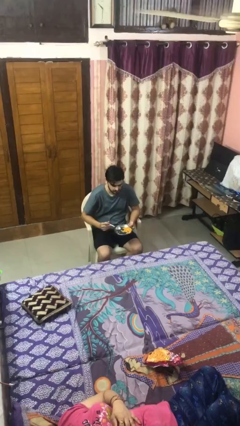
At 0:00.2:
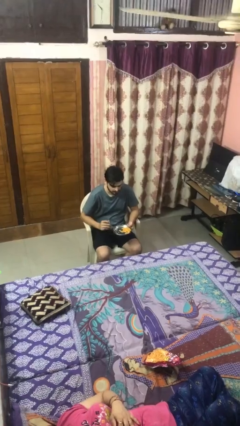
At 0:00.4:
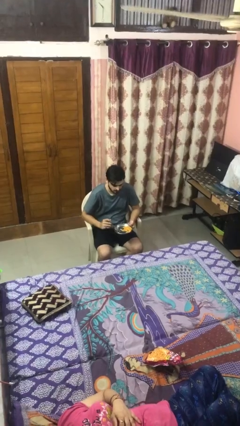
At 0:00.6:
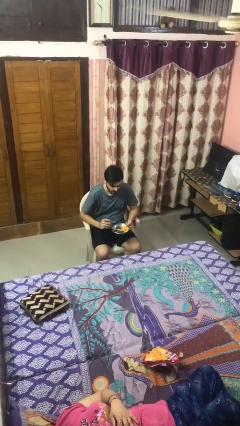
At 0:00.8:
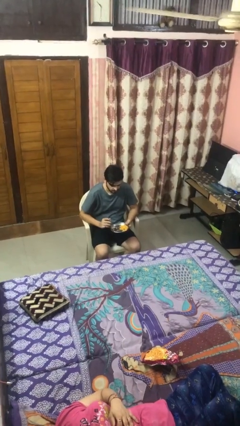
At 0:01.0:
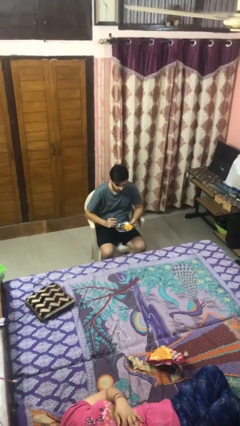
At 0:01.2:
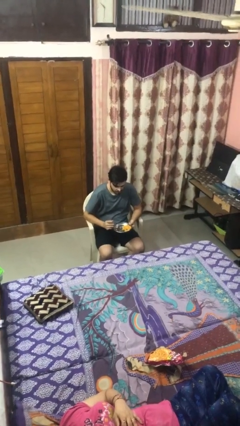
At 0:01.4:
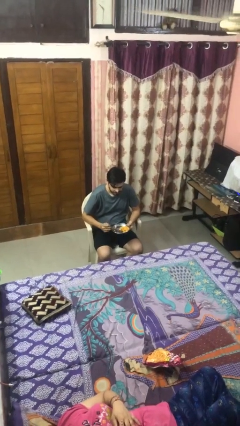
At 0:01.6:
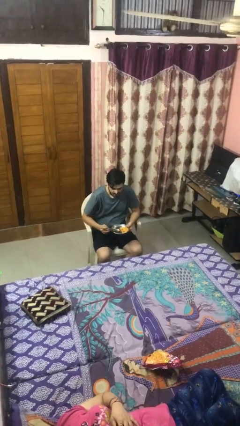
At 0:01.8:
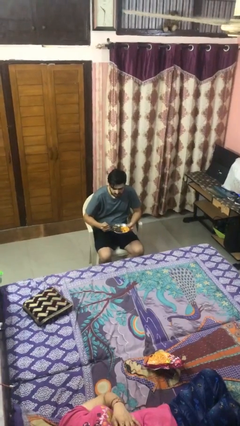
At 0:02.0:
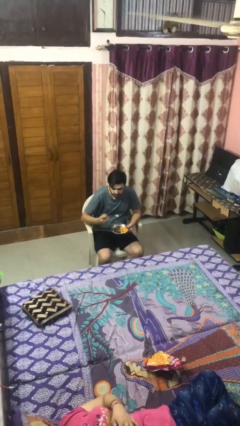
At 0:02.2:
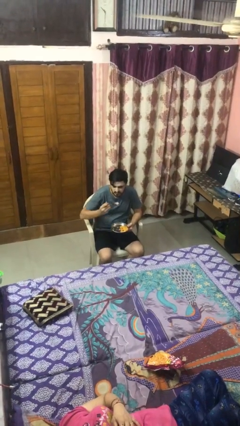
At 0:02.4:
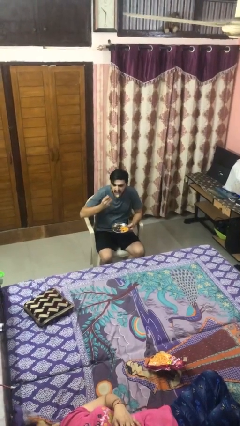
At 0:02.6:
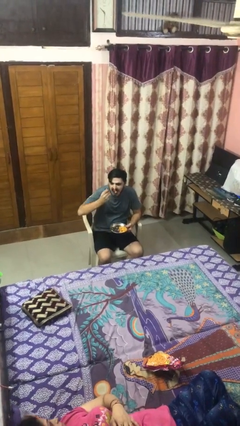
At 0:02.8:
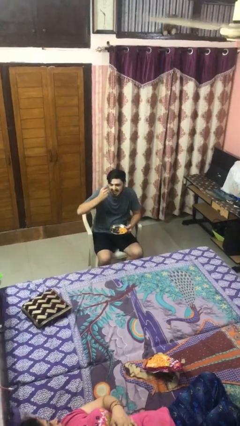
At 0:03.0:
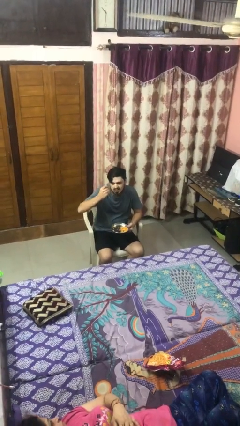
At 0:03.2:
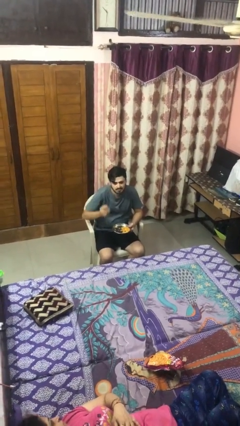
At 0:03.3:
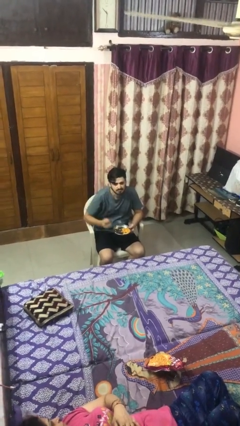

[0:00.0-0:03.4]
person eats with utensil

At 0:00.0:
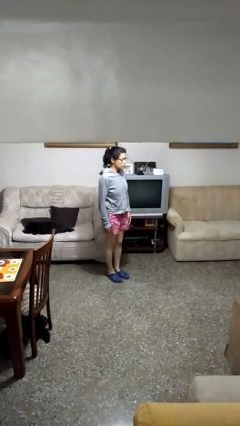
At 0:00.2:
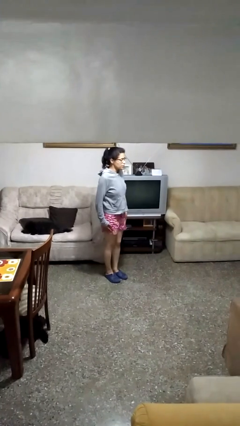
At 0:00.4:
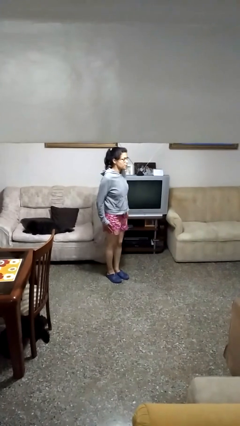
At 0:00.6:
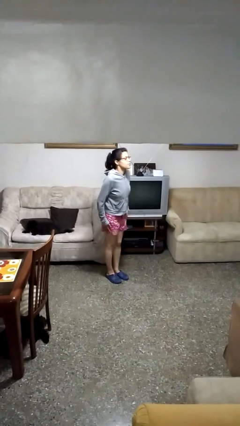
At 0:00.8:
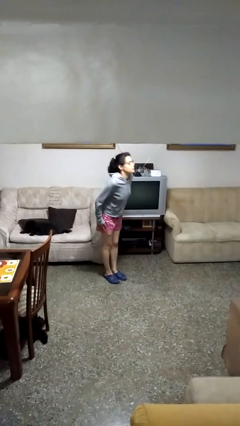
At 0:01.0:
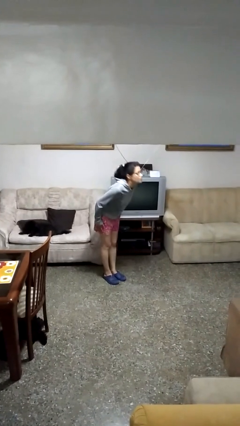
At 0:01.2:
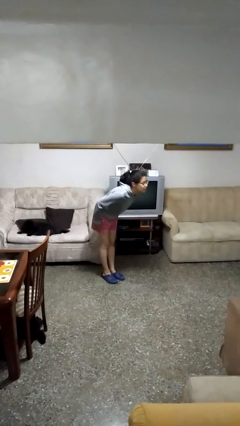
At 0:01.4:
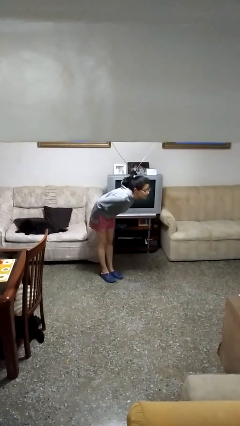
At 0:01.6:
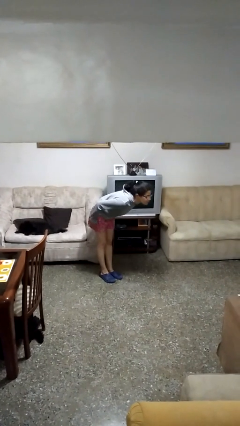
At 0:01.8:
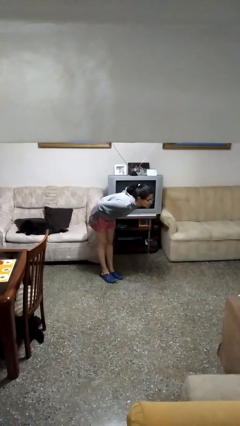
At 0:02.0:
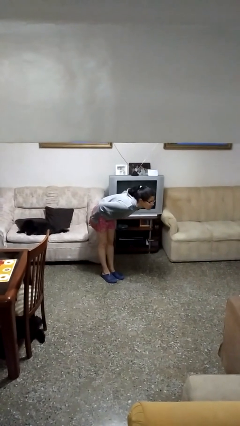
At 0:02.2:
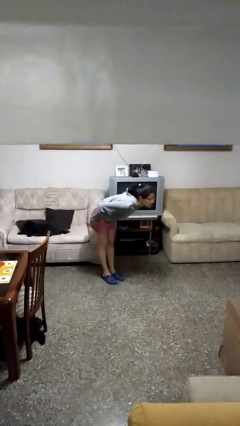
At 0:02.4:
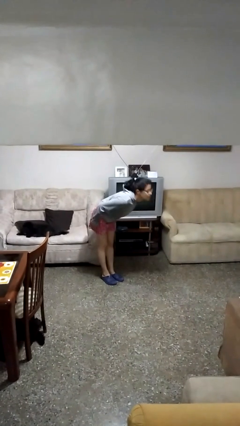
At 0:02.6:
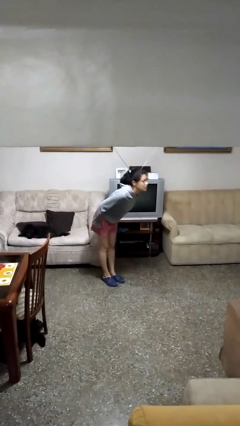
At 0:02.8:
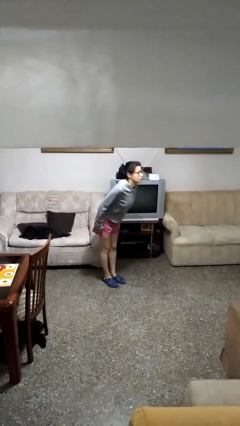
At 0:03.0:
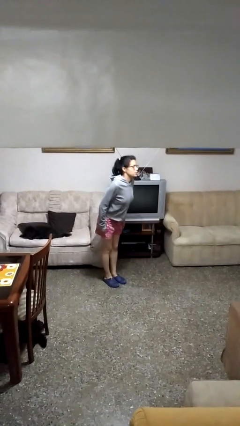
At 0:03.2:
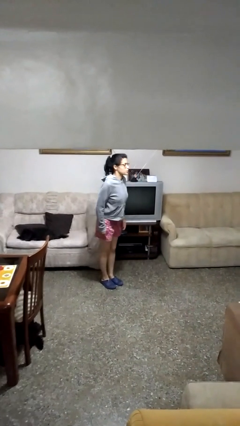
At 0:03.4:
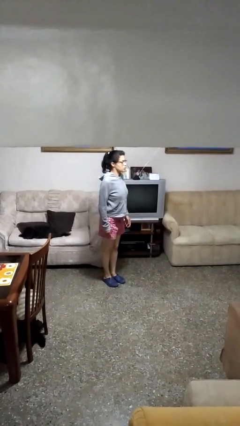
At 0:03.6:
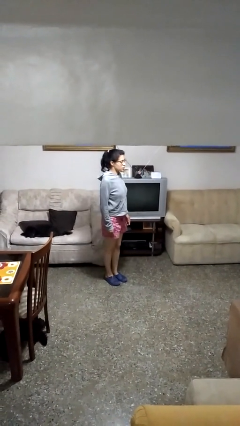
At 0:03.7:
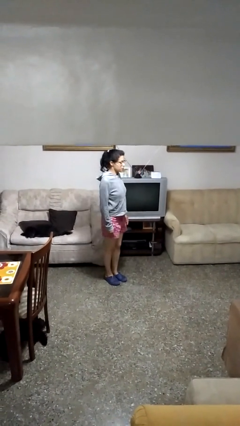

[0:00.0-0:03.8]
person bows

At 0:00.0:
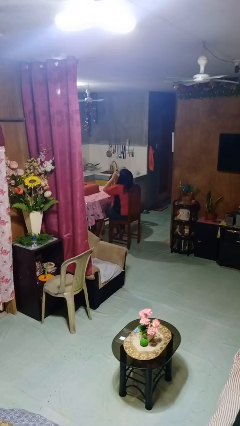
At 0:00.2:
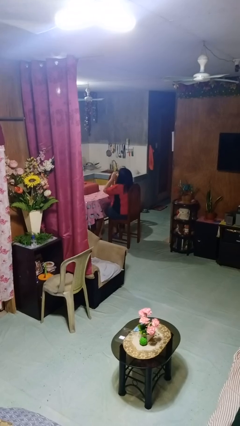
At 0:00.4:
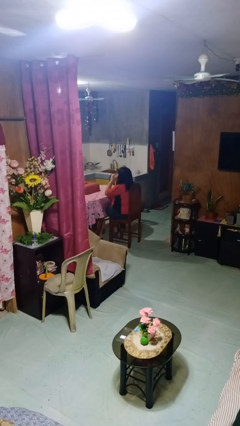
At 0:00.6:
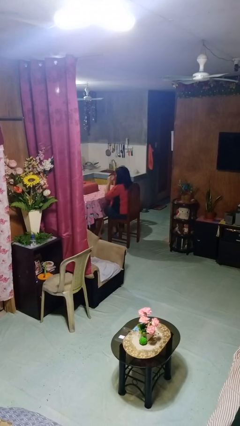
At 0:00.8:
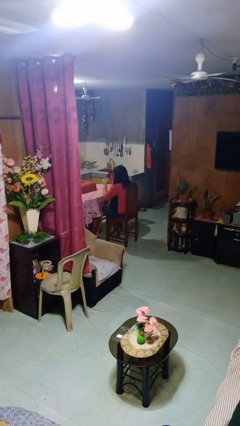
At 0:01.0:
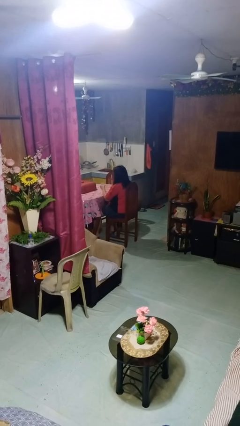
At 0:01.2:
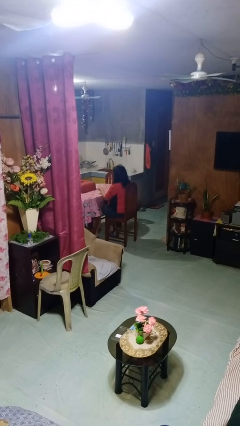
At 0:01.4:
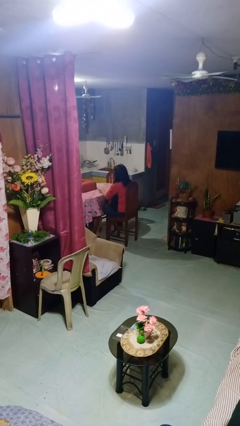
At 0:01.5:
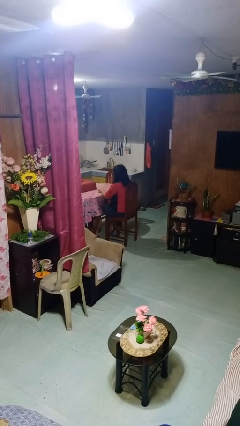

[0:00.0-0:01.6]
person puts down object on table

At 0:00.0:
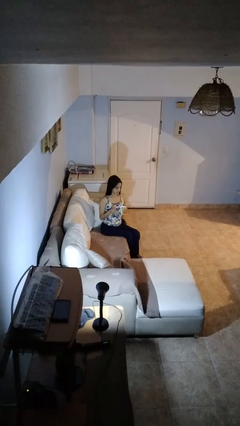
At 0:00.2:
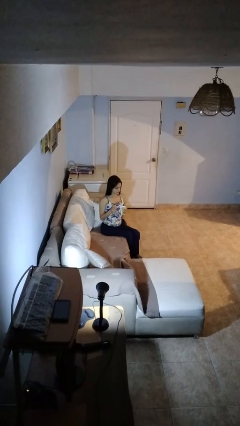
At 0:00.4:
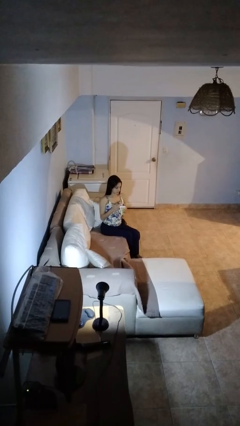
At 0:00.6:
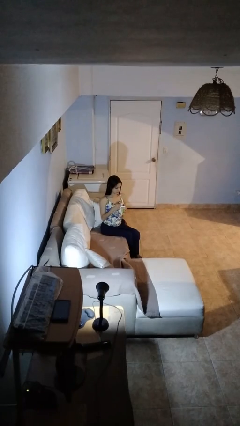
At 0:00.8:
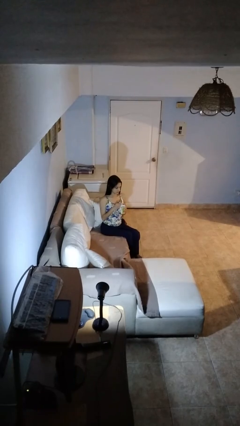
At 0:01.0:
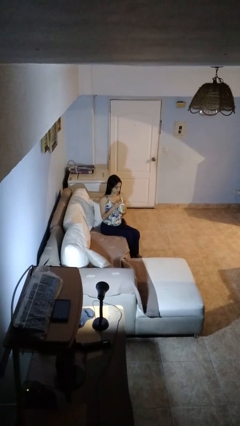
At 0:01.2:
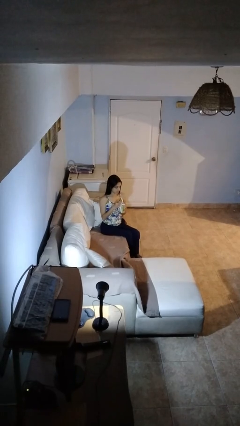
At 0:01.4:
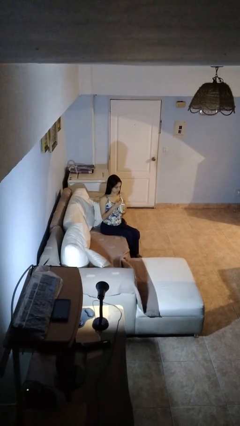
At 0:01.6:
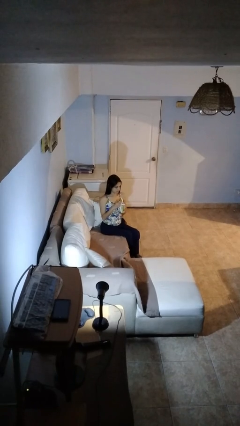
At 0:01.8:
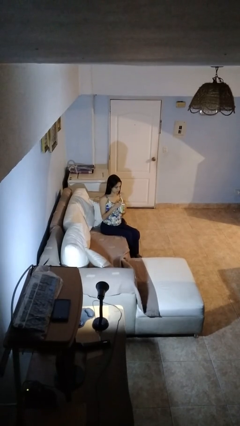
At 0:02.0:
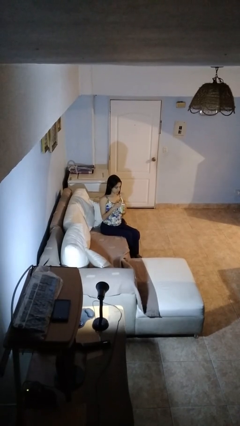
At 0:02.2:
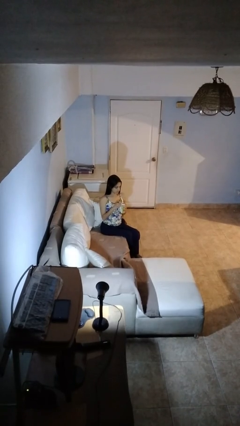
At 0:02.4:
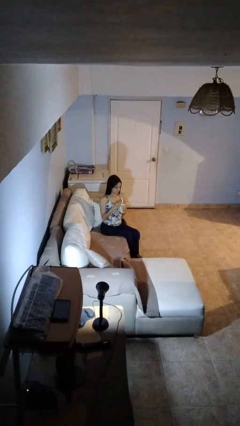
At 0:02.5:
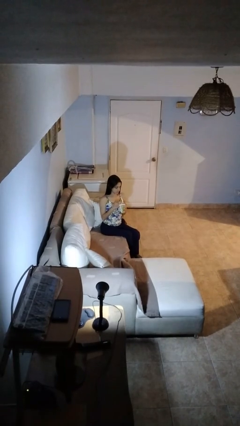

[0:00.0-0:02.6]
person stirs mug

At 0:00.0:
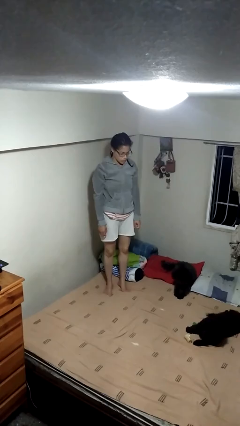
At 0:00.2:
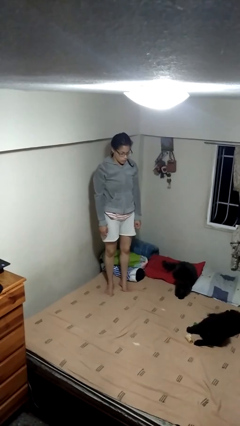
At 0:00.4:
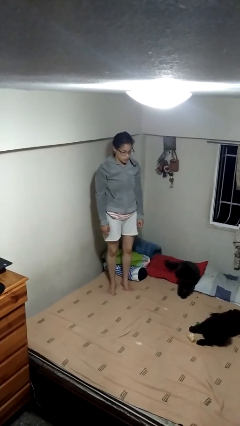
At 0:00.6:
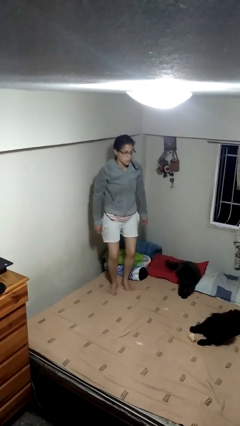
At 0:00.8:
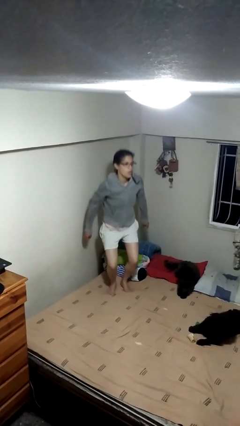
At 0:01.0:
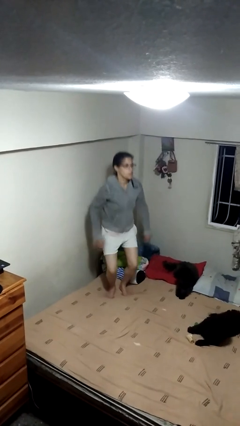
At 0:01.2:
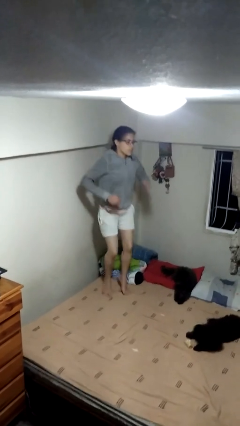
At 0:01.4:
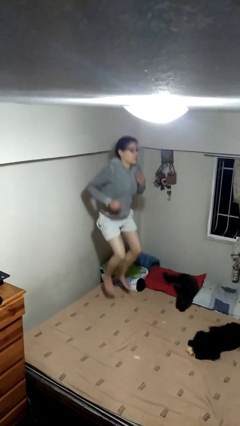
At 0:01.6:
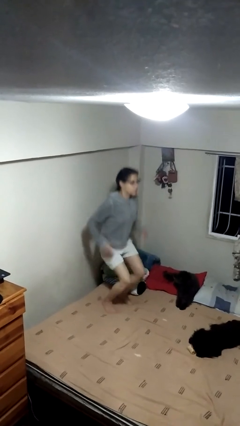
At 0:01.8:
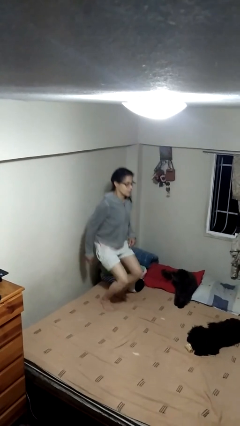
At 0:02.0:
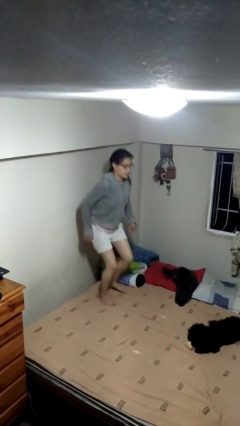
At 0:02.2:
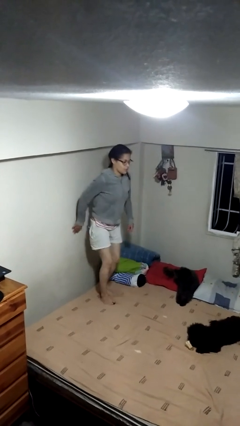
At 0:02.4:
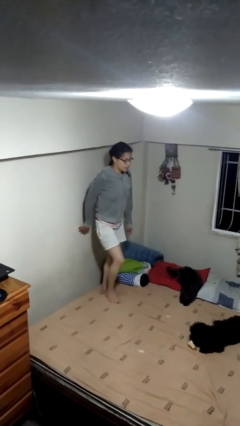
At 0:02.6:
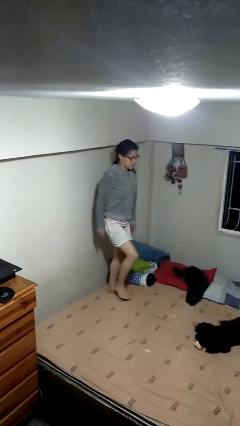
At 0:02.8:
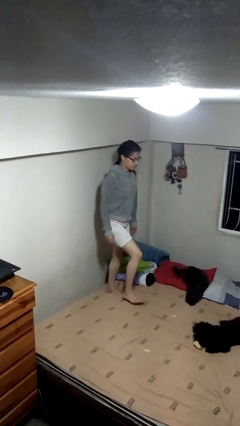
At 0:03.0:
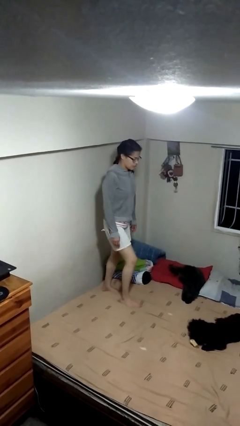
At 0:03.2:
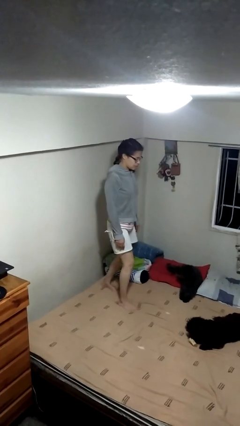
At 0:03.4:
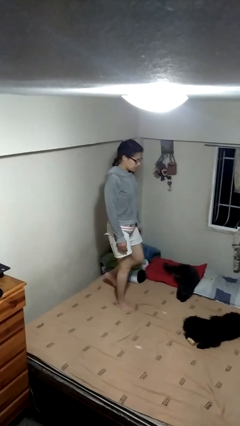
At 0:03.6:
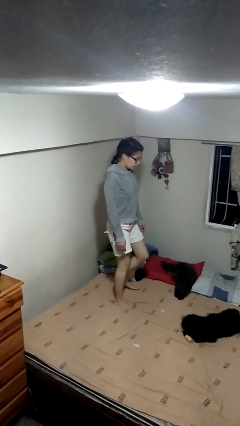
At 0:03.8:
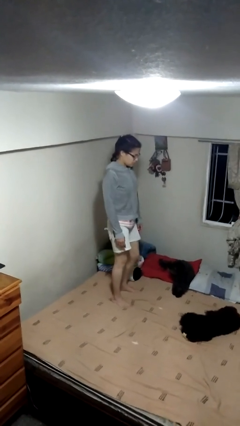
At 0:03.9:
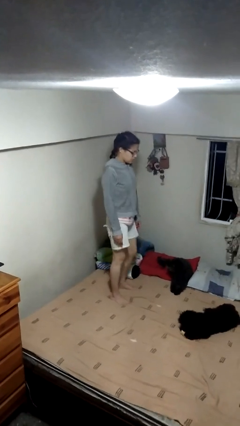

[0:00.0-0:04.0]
person jumps on bed

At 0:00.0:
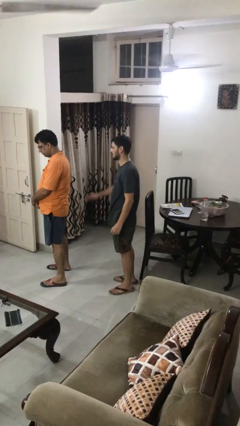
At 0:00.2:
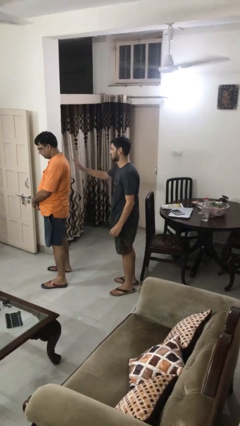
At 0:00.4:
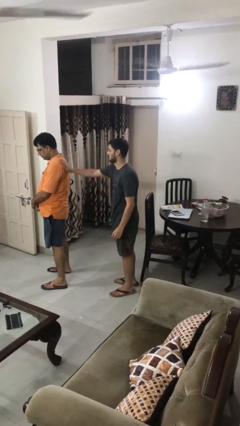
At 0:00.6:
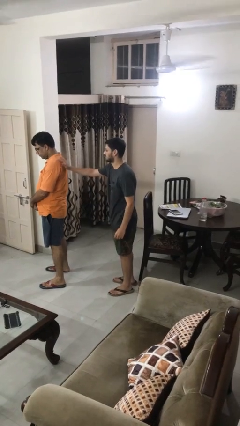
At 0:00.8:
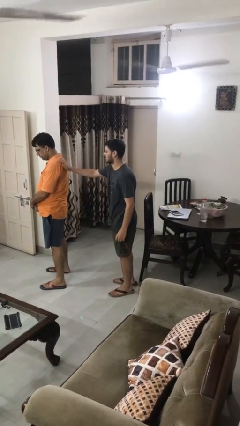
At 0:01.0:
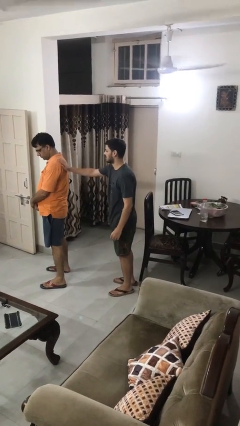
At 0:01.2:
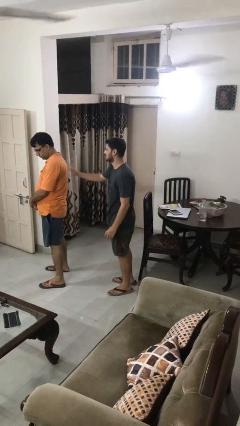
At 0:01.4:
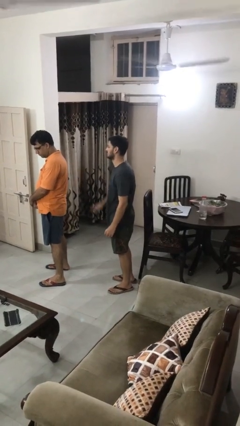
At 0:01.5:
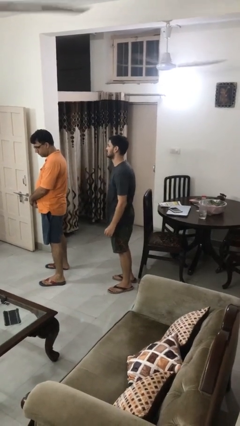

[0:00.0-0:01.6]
person touches back of person
